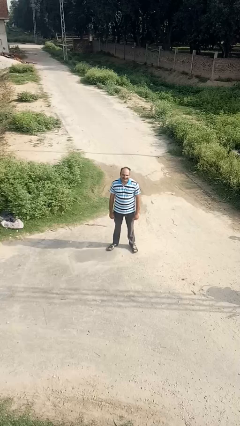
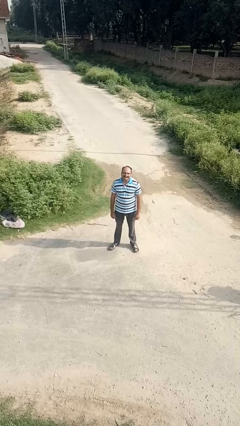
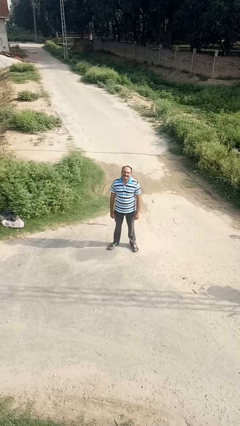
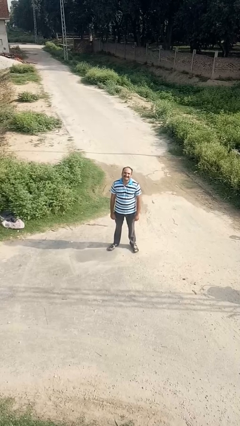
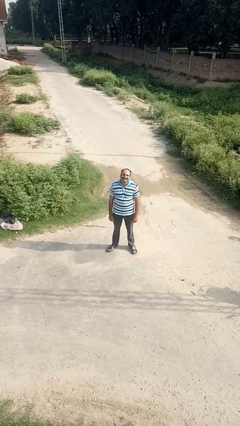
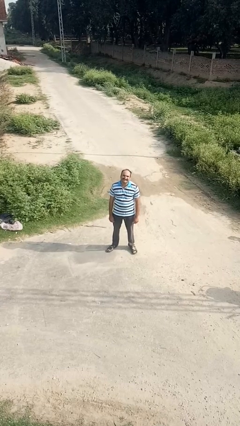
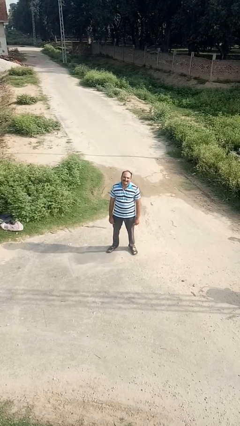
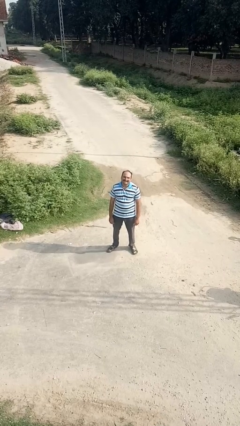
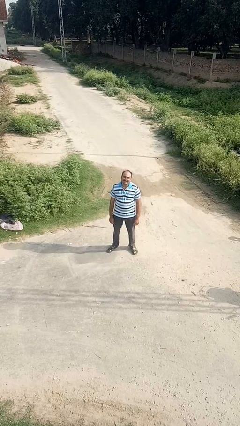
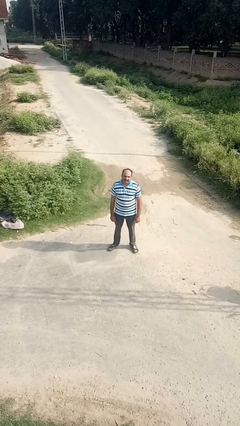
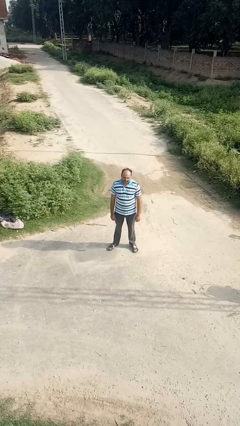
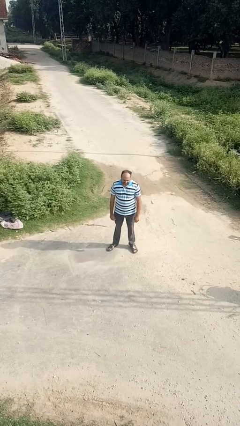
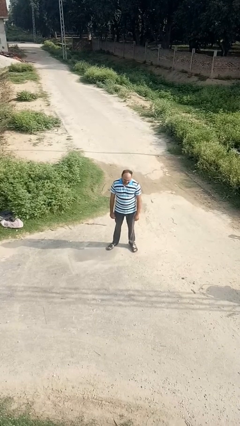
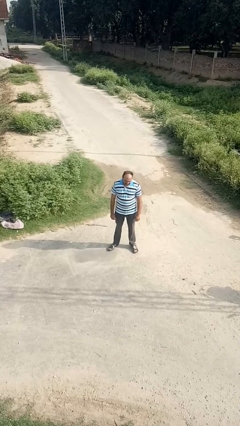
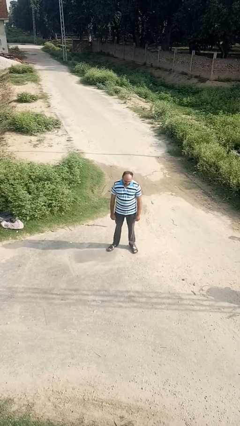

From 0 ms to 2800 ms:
person flosses

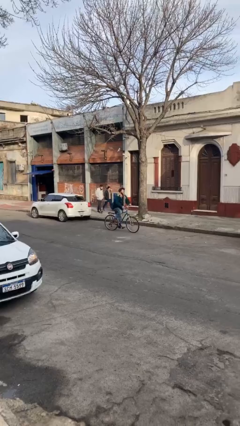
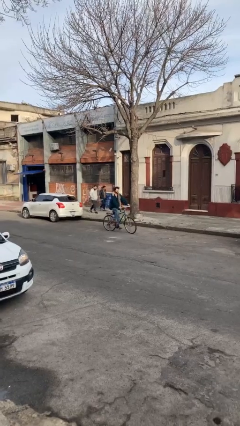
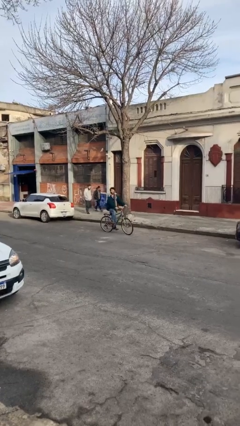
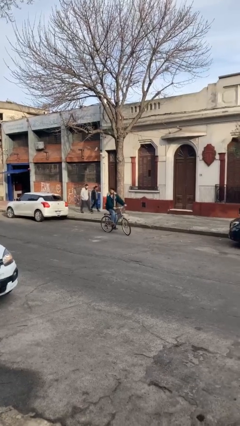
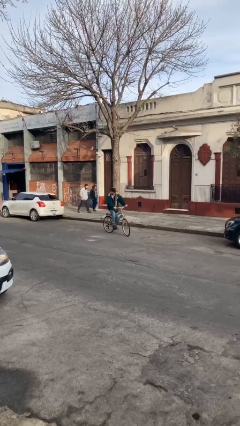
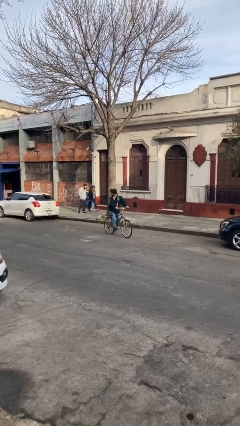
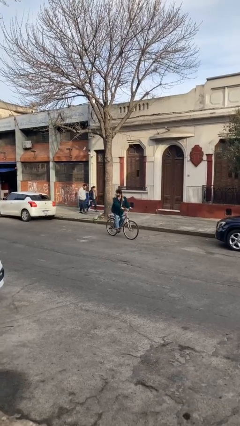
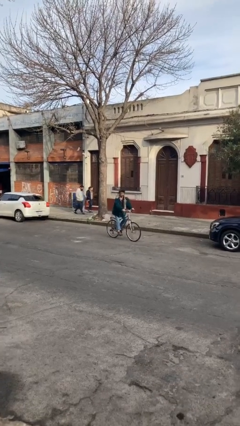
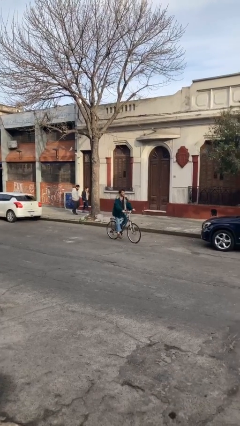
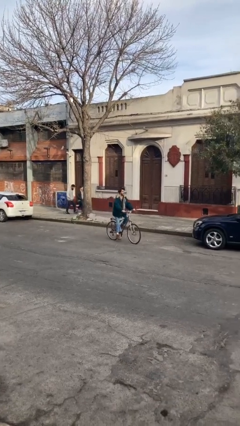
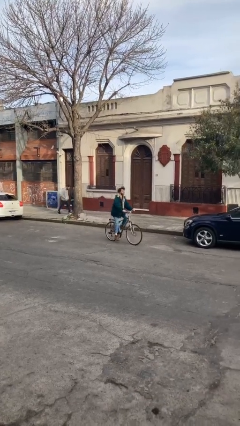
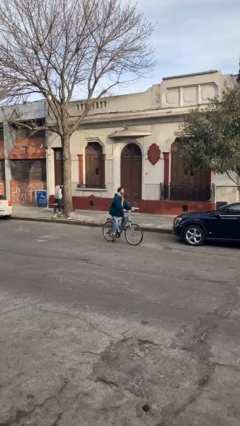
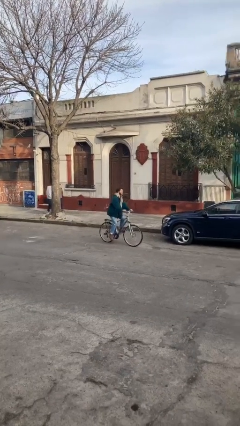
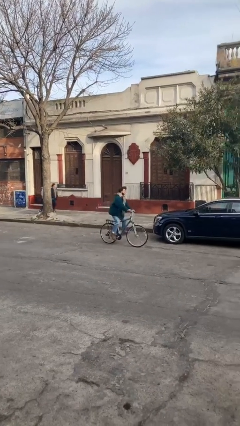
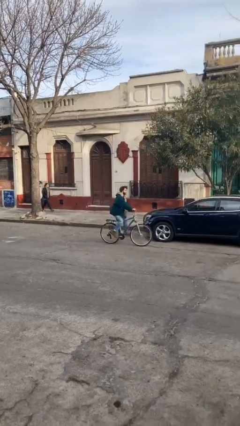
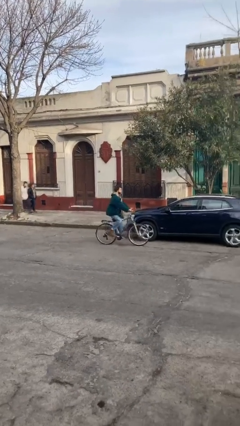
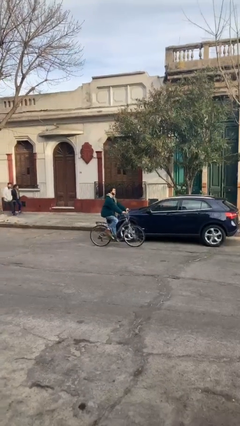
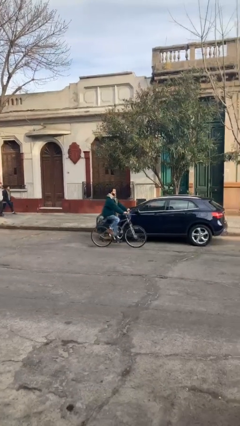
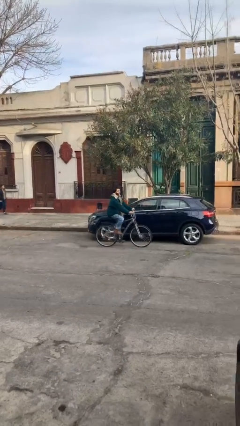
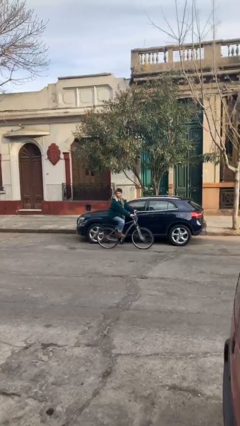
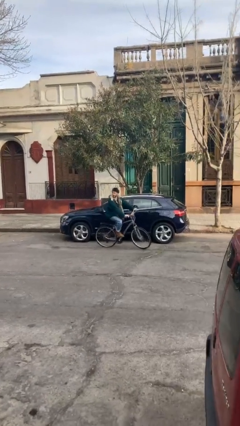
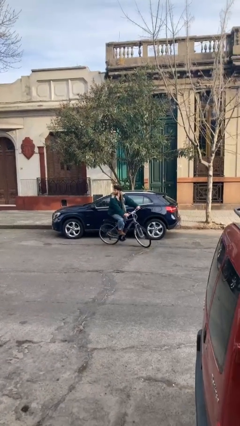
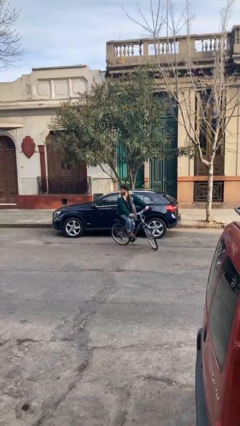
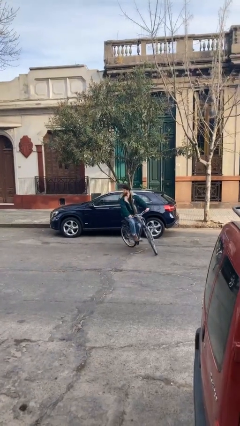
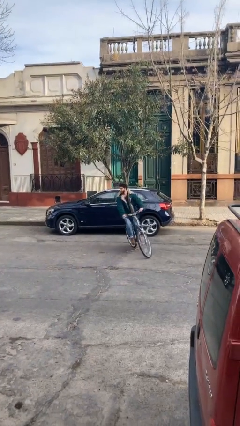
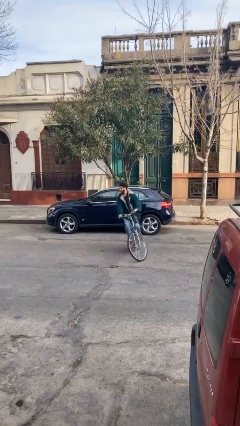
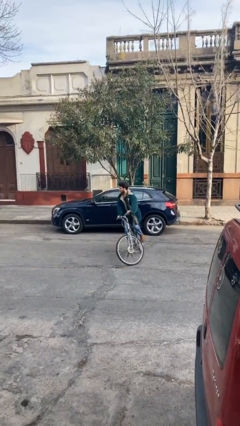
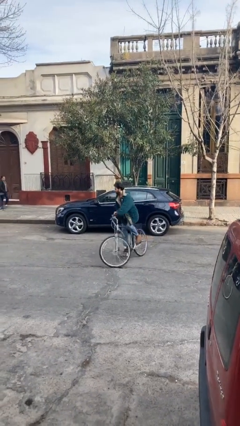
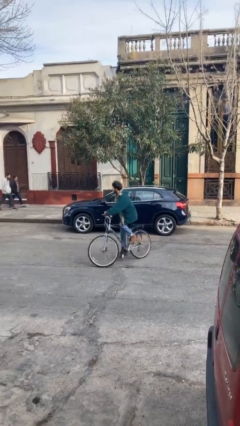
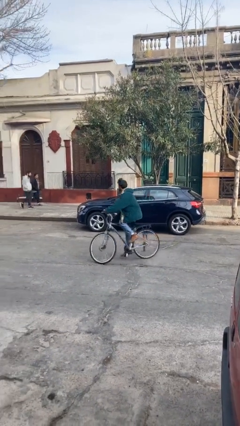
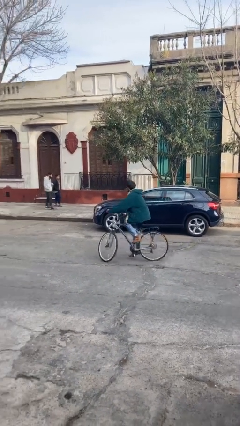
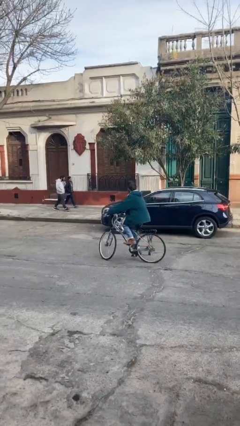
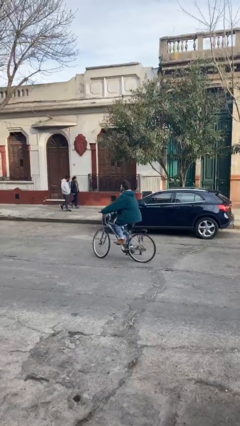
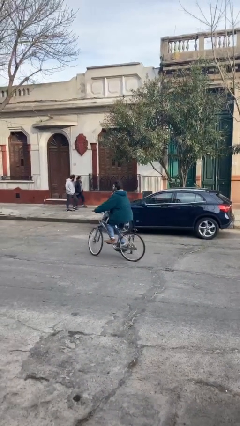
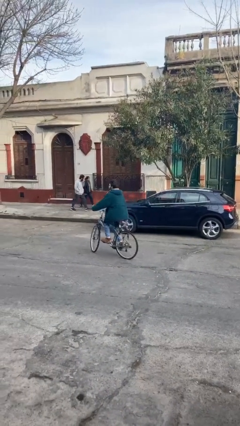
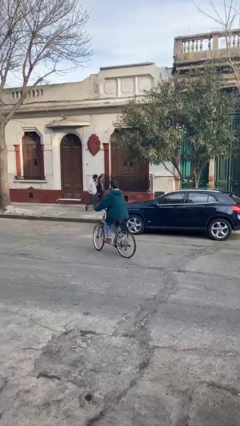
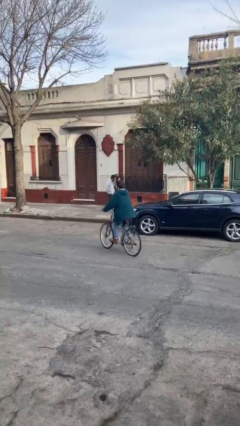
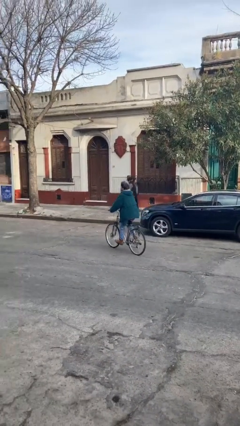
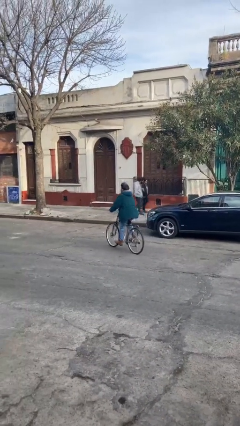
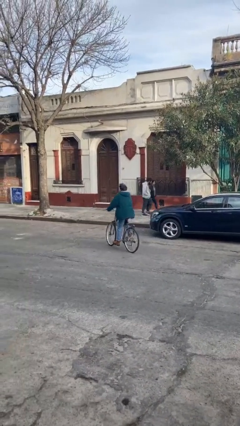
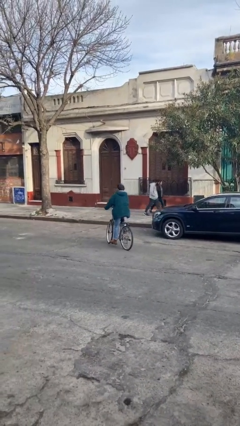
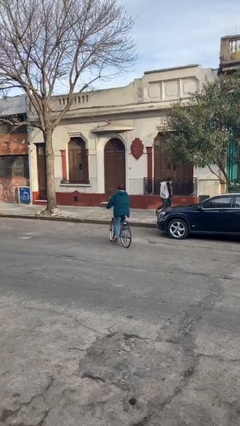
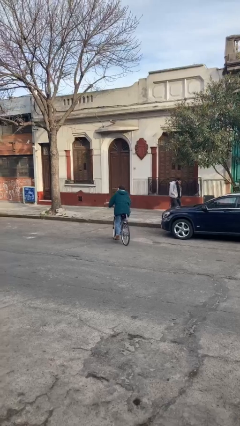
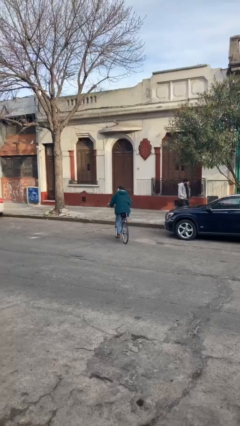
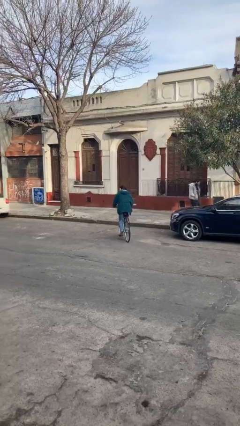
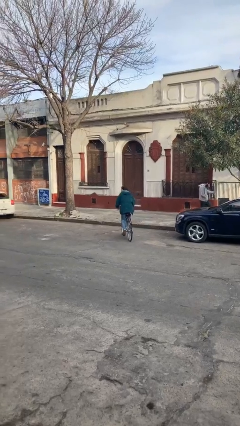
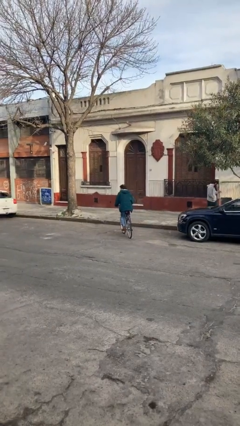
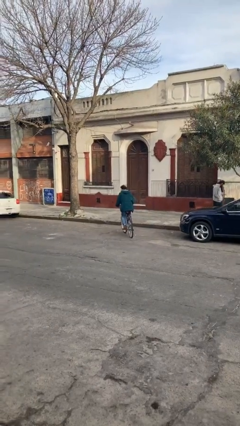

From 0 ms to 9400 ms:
person rides bicycle

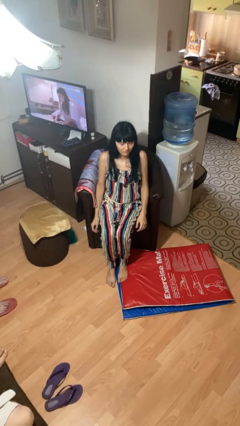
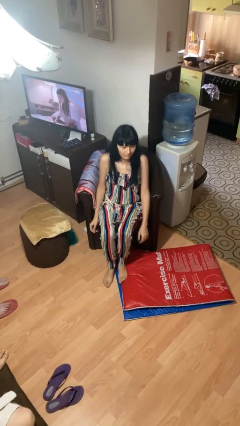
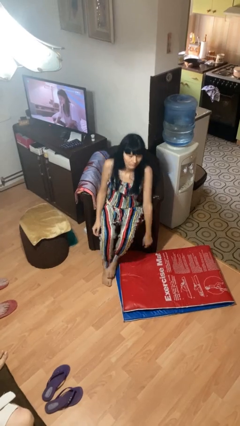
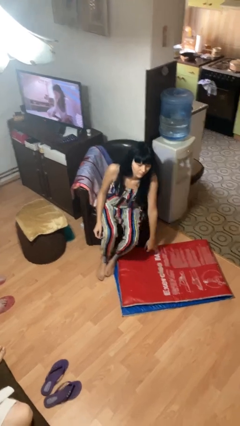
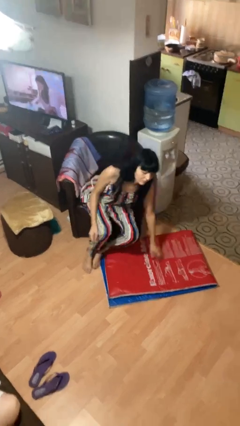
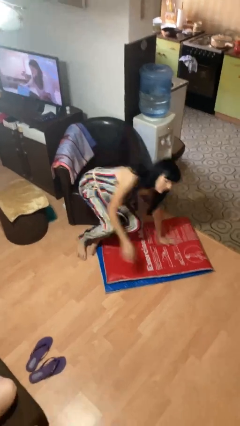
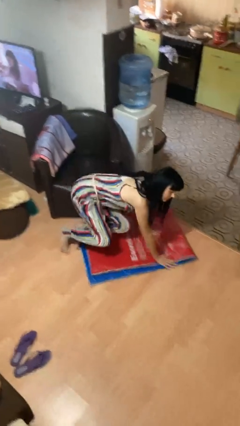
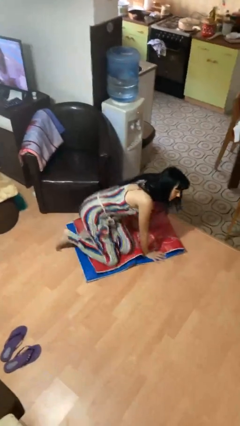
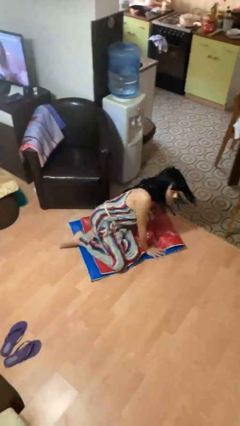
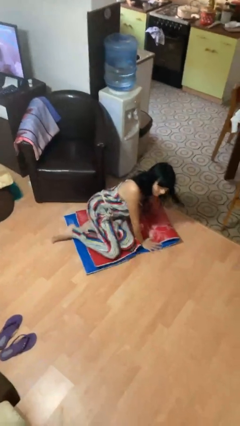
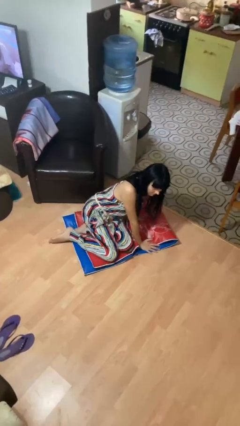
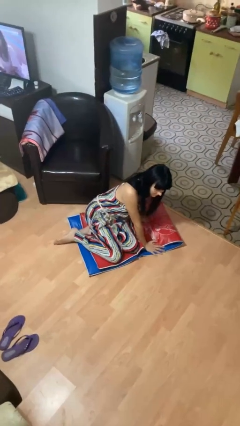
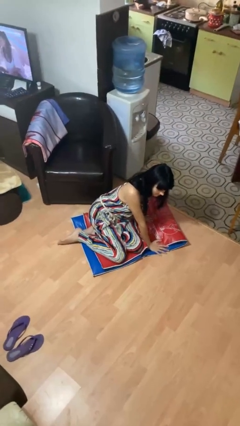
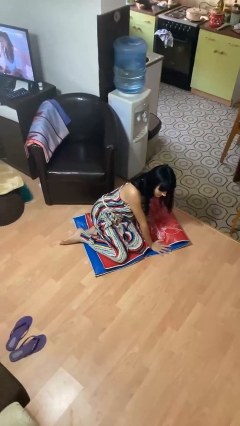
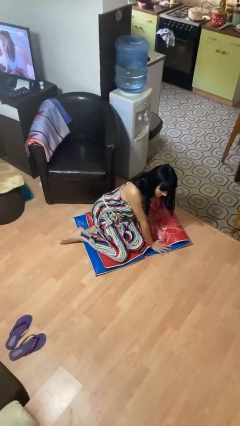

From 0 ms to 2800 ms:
person falls from chair

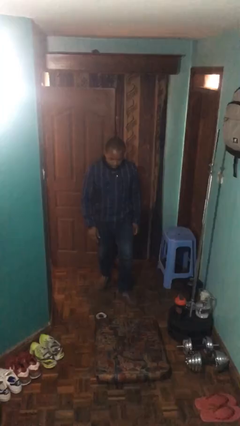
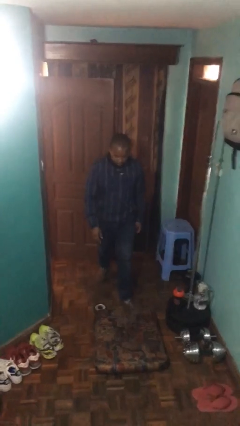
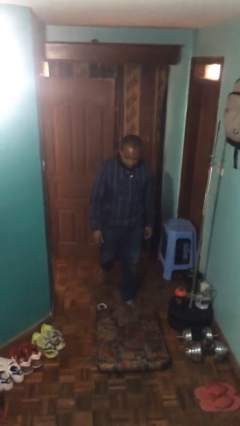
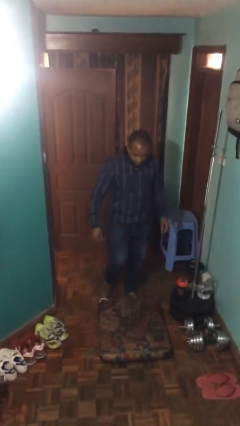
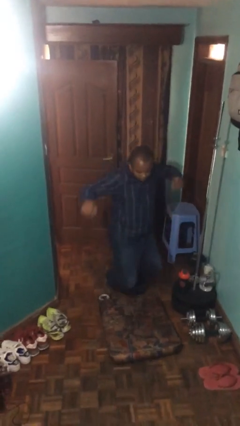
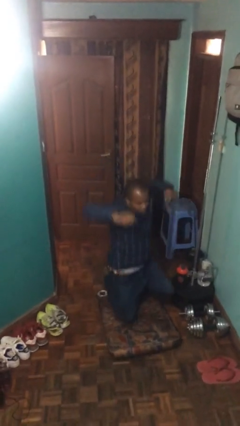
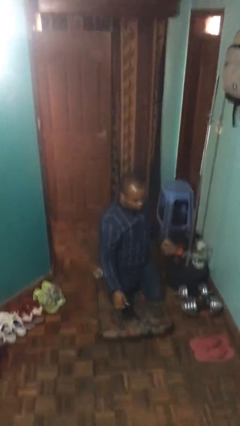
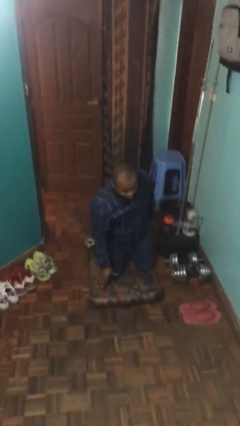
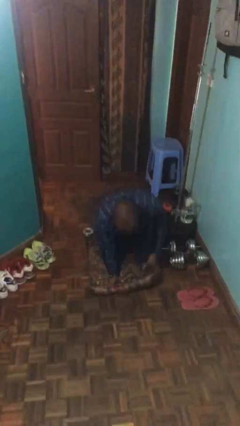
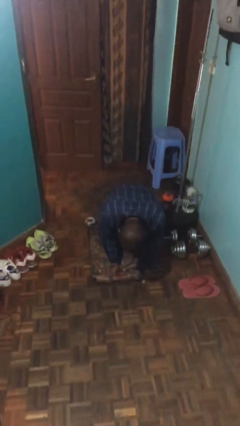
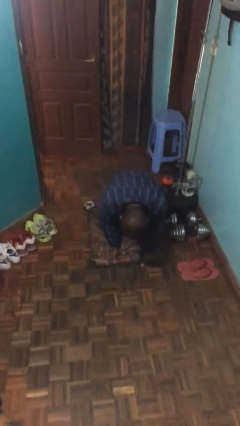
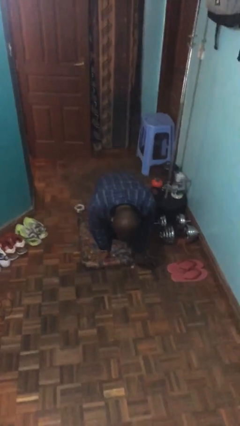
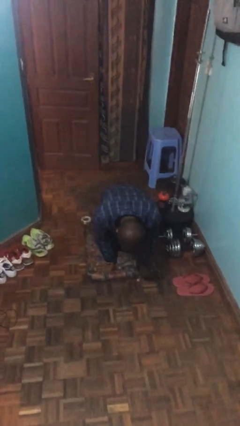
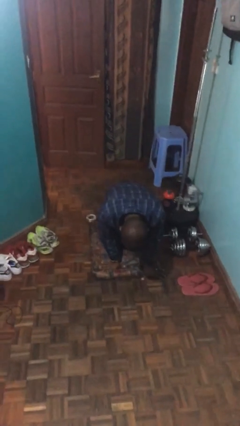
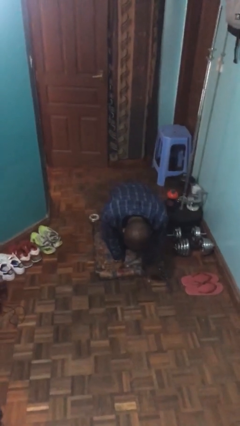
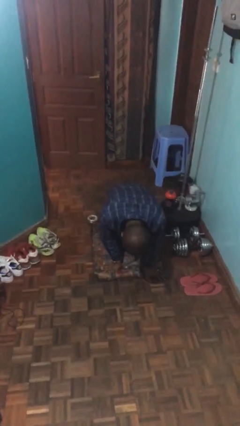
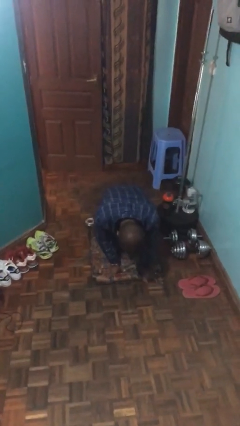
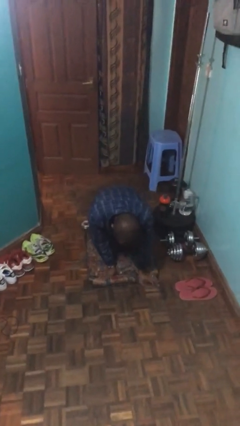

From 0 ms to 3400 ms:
person trips on object on floor
